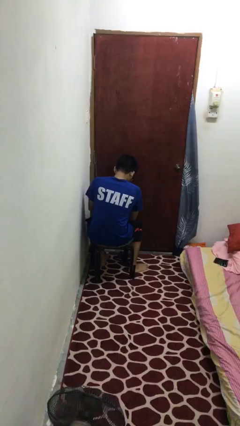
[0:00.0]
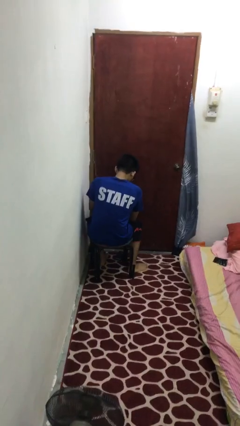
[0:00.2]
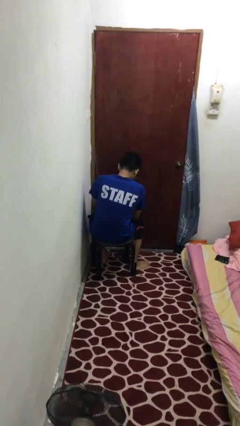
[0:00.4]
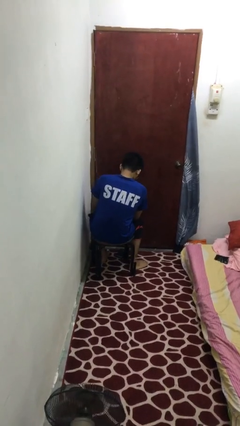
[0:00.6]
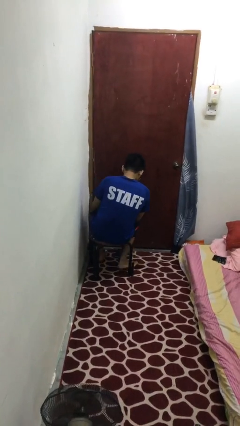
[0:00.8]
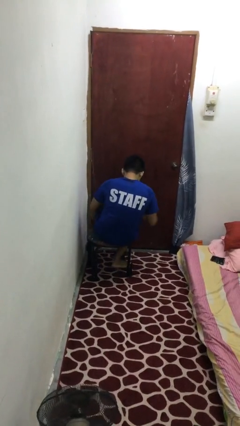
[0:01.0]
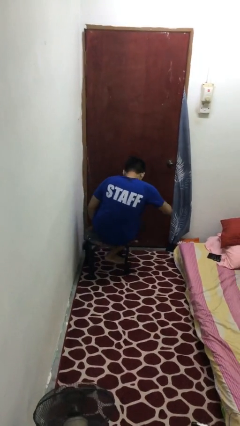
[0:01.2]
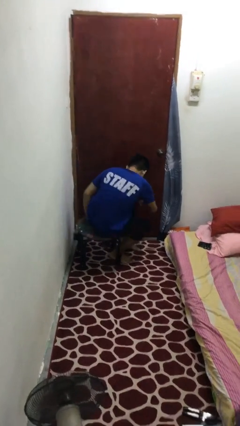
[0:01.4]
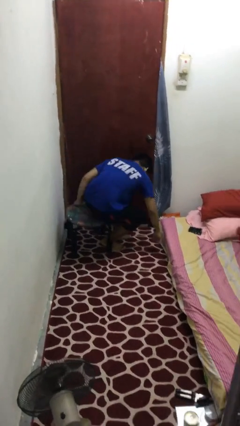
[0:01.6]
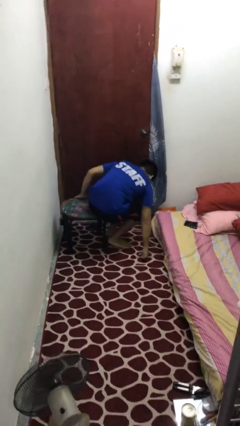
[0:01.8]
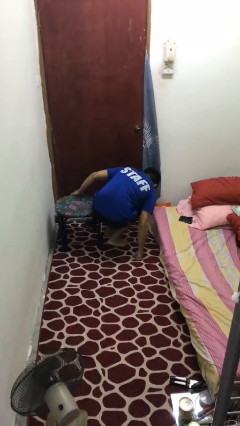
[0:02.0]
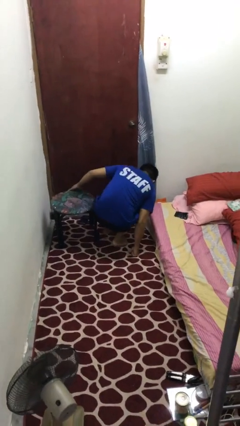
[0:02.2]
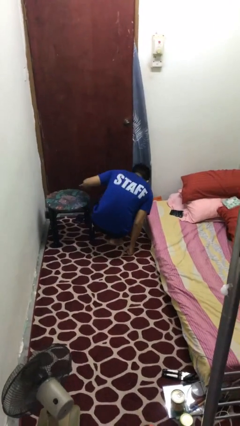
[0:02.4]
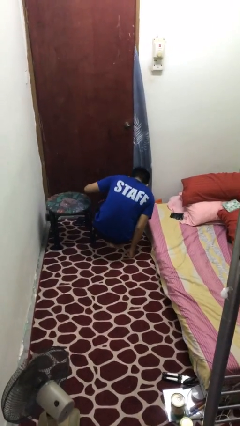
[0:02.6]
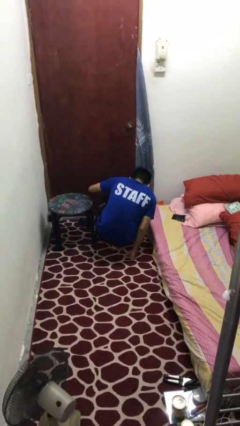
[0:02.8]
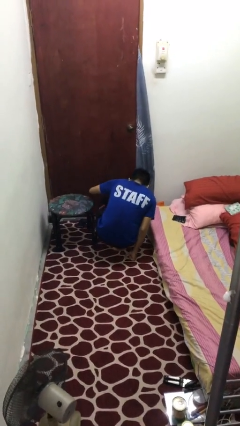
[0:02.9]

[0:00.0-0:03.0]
person falls from chair

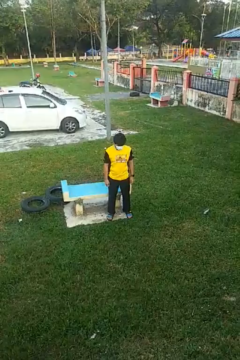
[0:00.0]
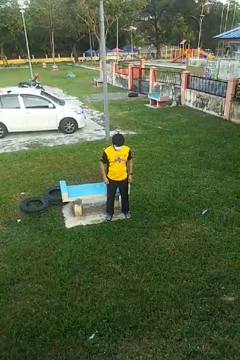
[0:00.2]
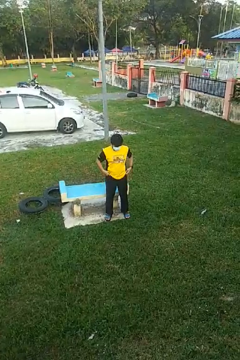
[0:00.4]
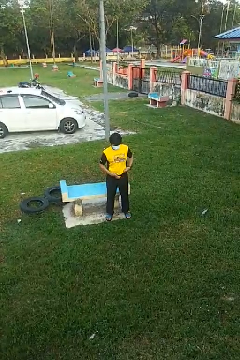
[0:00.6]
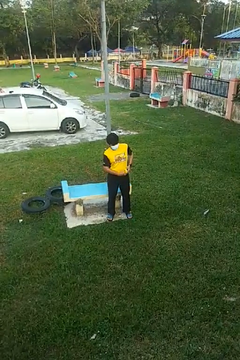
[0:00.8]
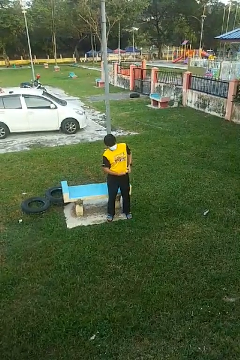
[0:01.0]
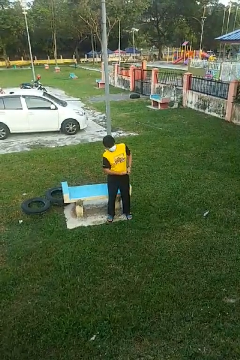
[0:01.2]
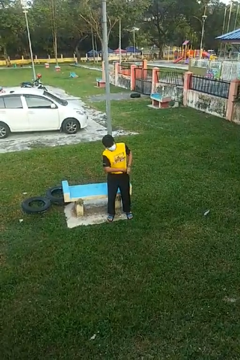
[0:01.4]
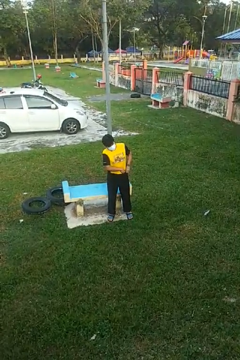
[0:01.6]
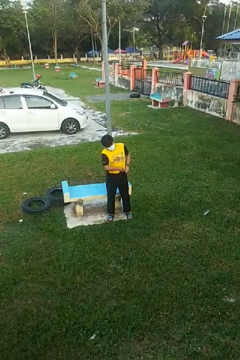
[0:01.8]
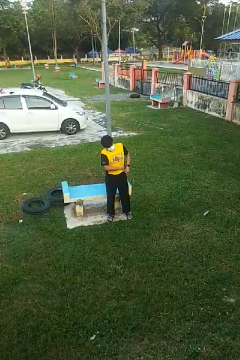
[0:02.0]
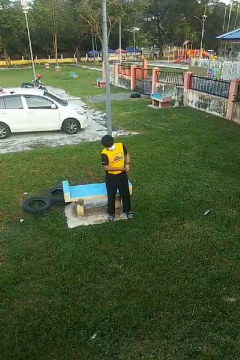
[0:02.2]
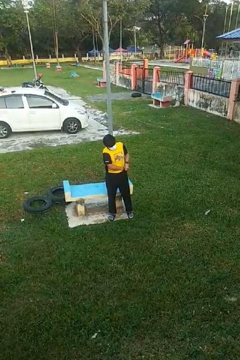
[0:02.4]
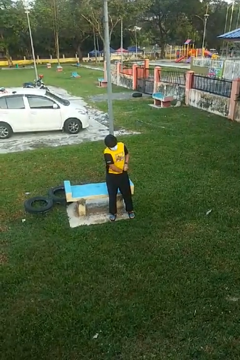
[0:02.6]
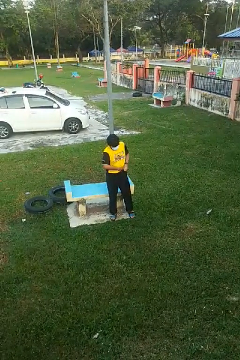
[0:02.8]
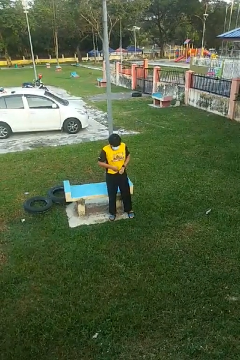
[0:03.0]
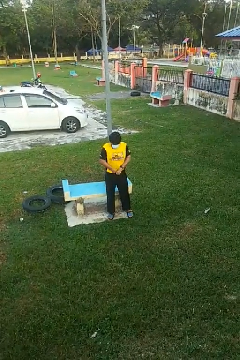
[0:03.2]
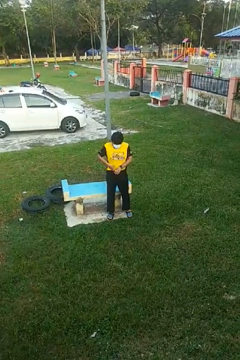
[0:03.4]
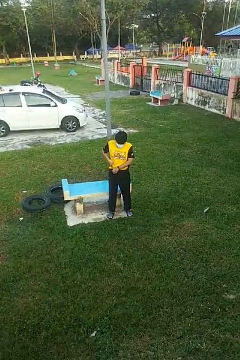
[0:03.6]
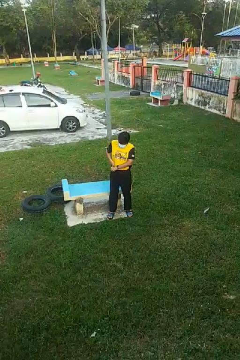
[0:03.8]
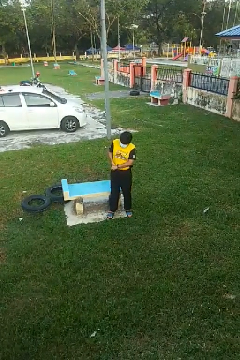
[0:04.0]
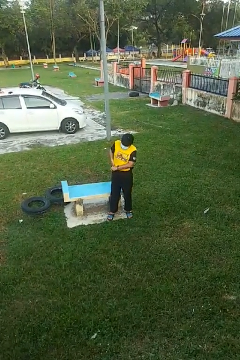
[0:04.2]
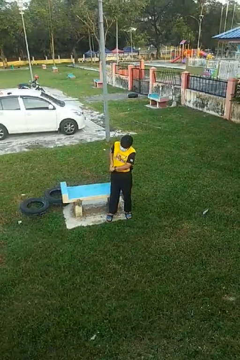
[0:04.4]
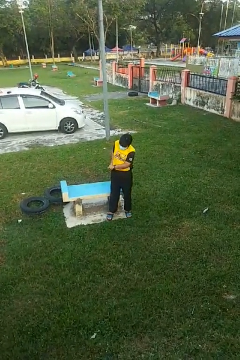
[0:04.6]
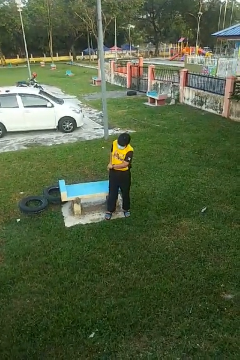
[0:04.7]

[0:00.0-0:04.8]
person tucks in shirt

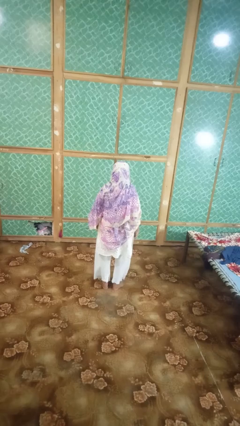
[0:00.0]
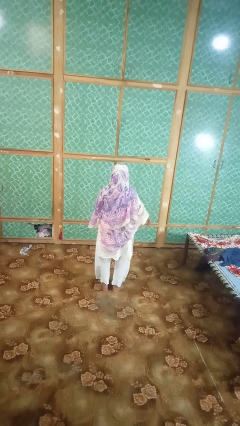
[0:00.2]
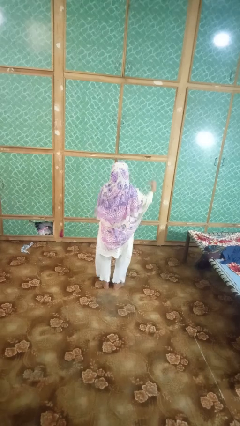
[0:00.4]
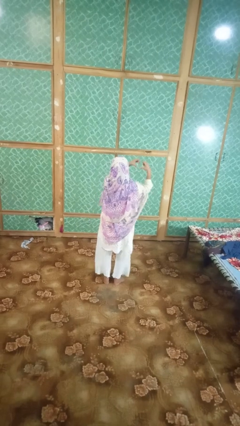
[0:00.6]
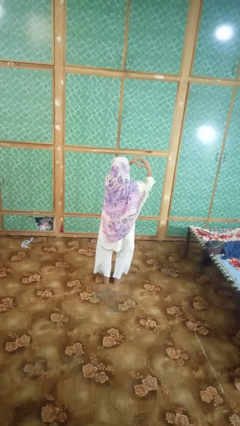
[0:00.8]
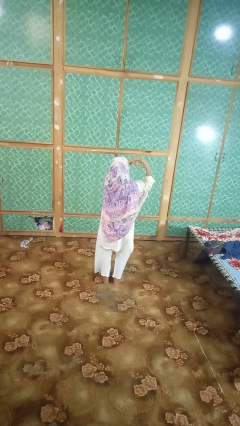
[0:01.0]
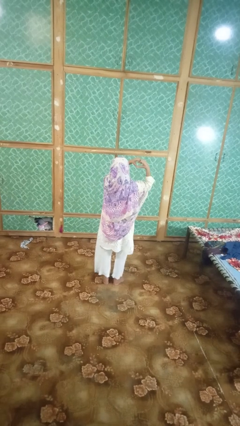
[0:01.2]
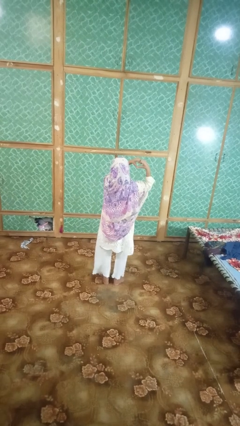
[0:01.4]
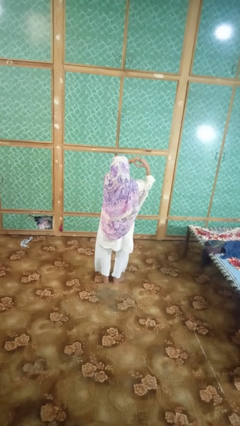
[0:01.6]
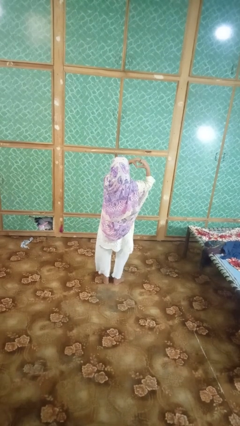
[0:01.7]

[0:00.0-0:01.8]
person gestures heart

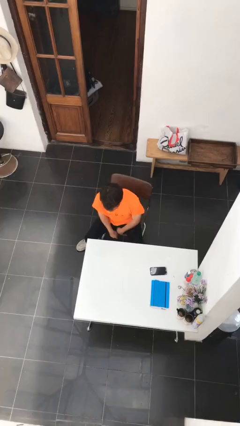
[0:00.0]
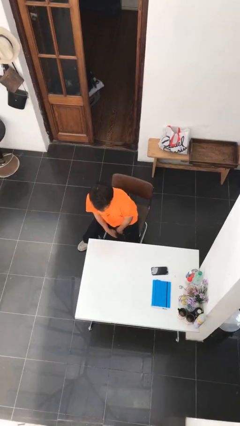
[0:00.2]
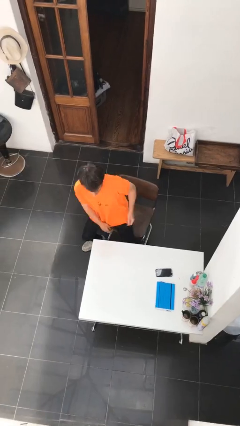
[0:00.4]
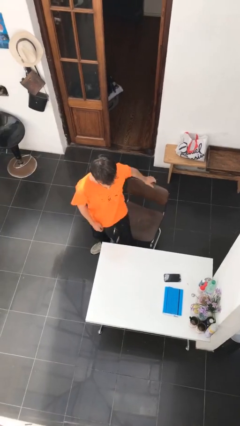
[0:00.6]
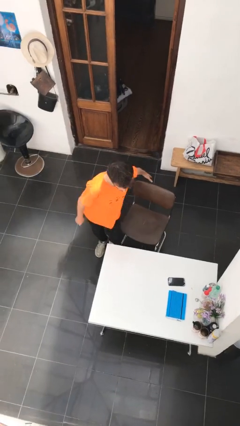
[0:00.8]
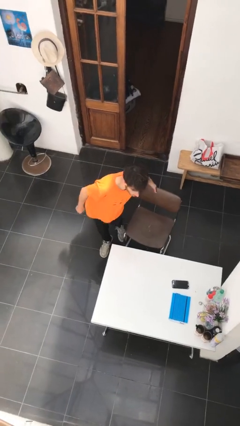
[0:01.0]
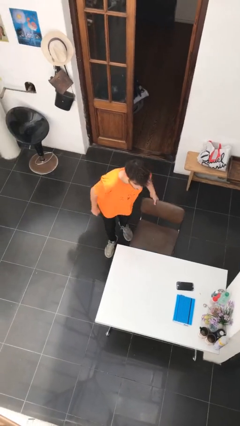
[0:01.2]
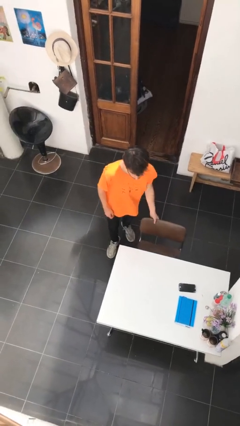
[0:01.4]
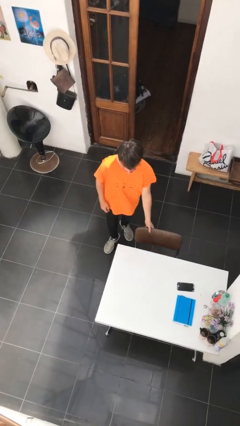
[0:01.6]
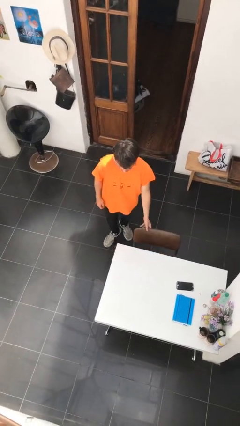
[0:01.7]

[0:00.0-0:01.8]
person stands up

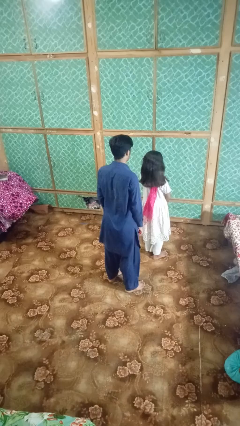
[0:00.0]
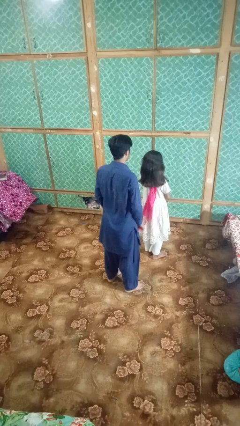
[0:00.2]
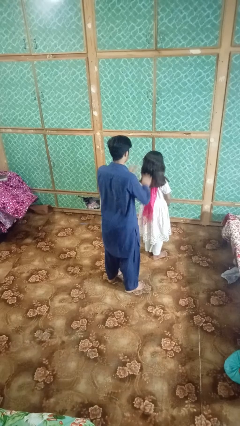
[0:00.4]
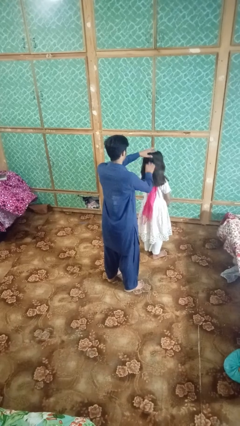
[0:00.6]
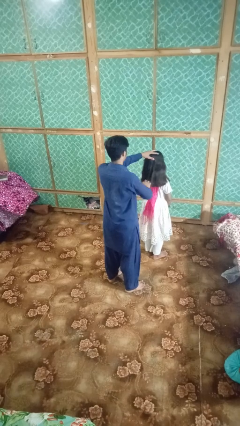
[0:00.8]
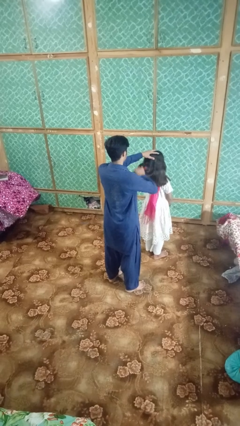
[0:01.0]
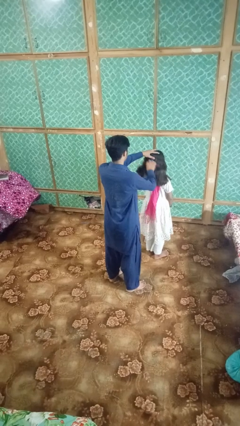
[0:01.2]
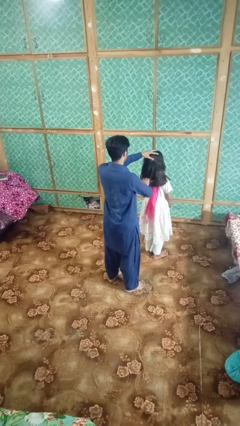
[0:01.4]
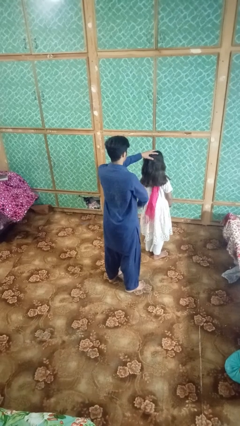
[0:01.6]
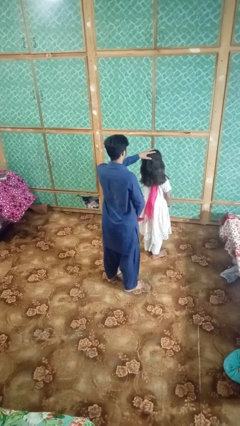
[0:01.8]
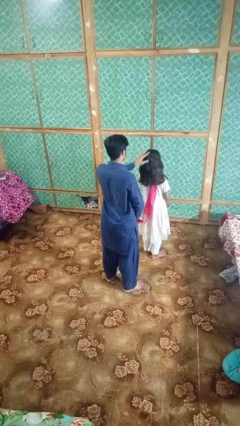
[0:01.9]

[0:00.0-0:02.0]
person brushes hair of person

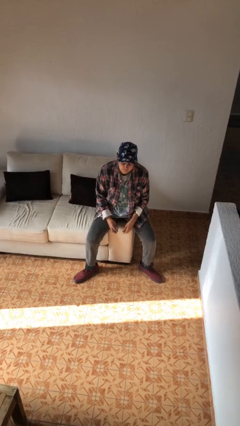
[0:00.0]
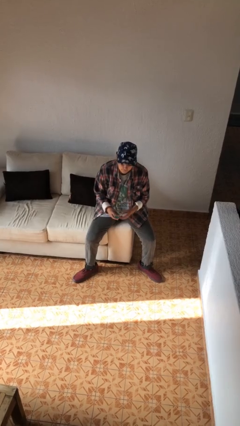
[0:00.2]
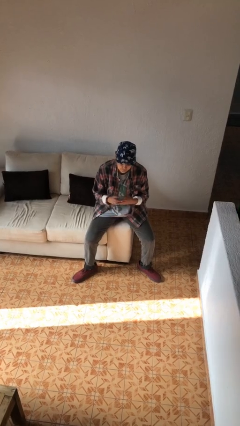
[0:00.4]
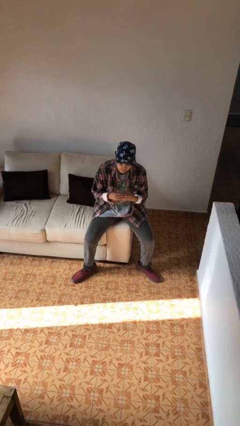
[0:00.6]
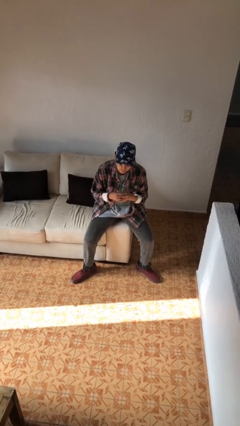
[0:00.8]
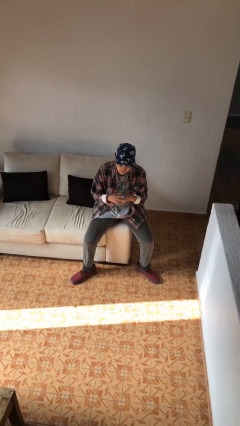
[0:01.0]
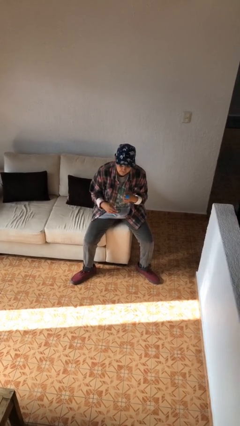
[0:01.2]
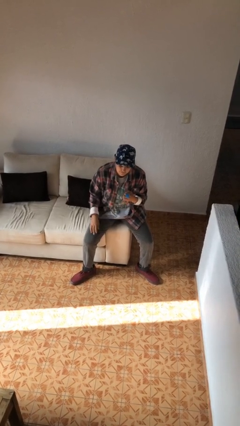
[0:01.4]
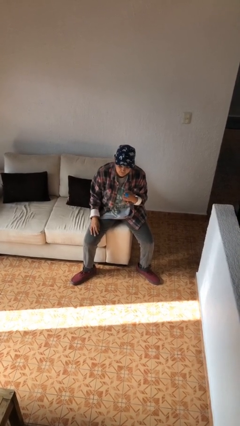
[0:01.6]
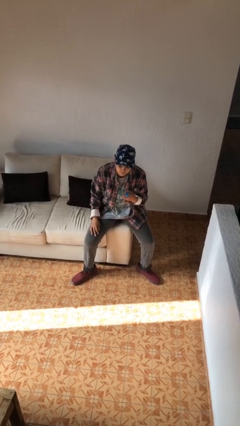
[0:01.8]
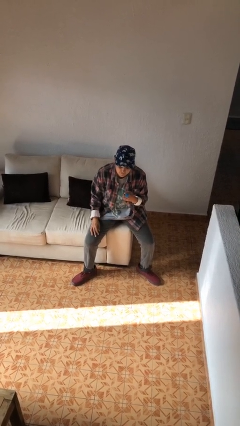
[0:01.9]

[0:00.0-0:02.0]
person puts on ring

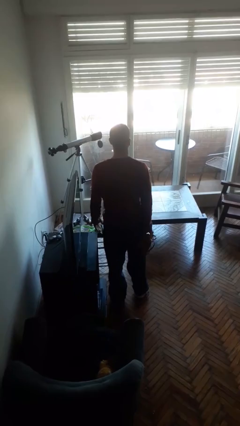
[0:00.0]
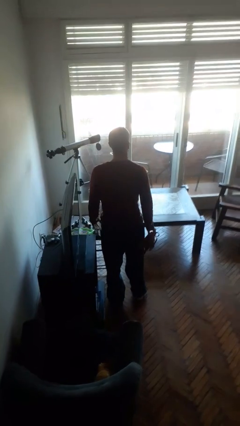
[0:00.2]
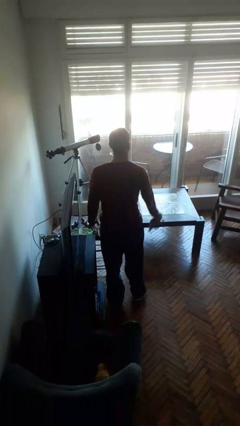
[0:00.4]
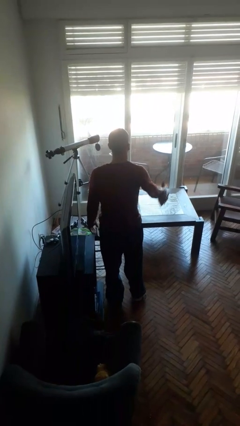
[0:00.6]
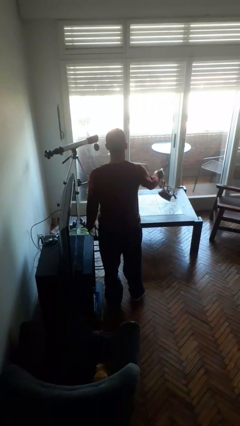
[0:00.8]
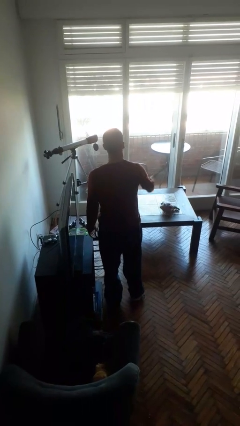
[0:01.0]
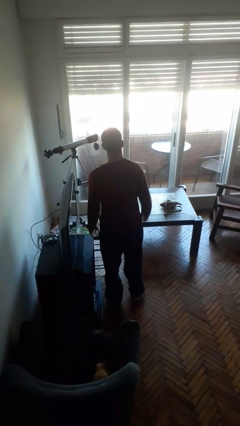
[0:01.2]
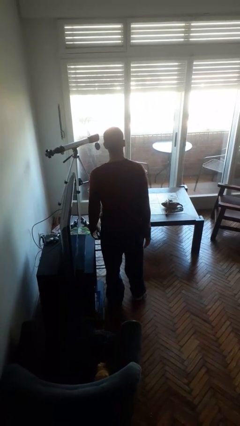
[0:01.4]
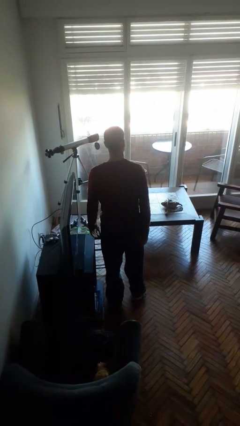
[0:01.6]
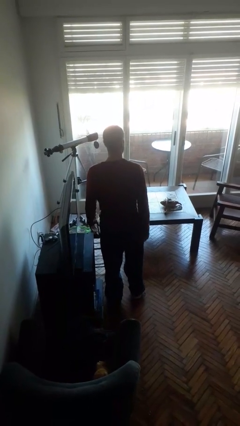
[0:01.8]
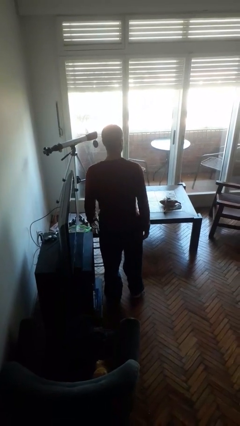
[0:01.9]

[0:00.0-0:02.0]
person throws object on table

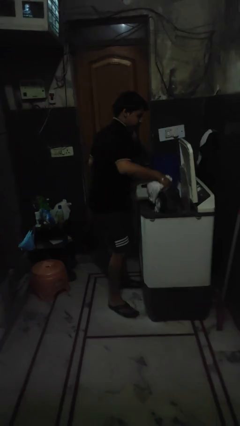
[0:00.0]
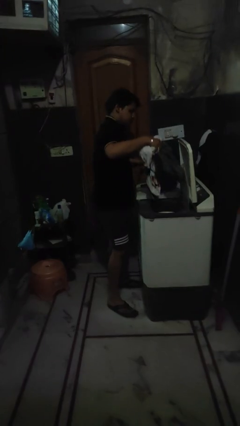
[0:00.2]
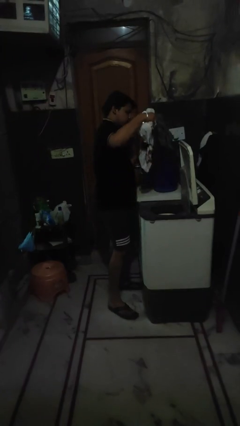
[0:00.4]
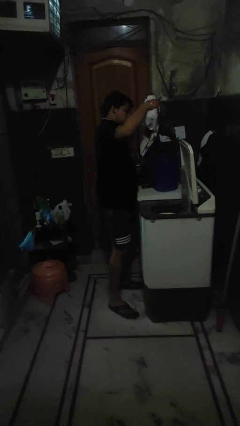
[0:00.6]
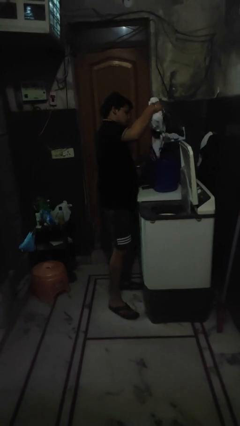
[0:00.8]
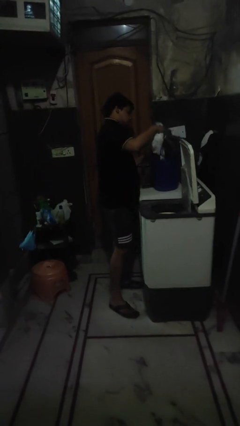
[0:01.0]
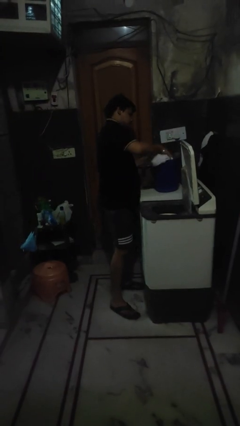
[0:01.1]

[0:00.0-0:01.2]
person unloads clotheswasher
